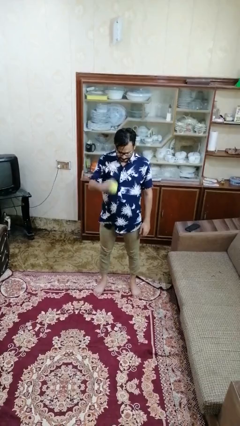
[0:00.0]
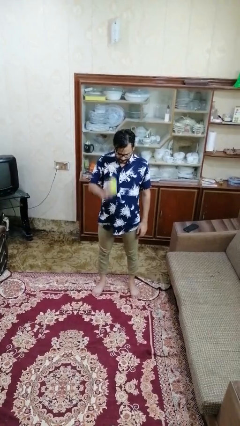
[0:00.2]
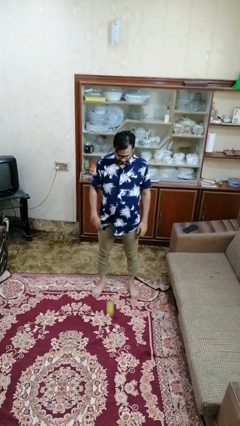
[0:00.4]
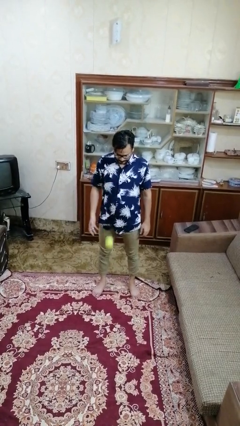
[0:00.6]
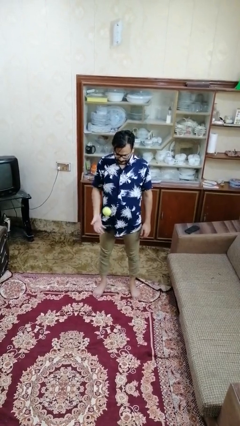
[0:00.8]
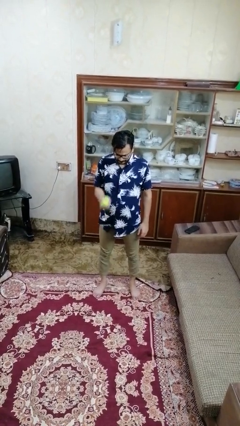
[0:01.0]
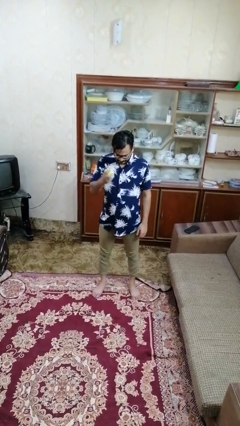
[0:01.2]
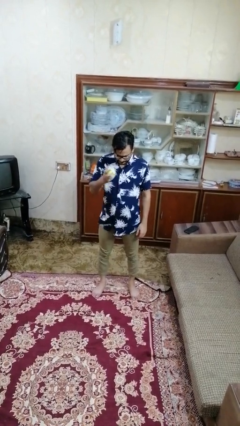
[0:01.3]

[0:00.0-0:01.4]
person bounces ball on floor

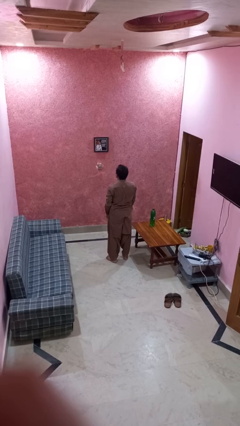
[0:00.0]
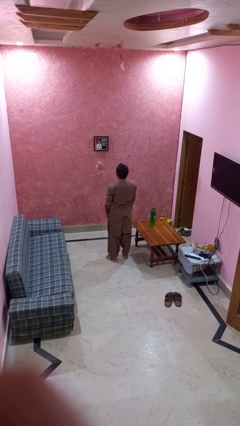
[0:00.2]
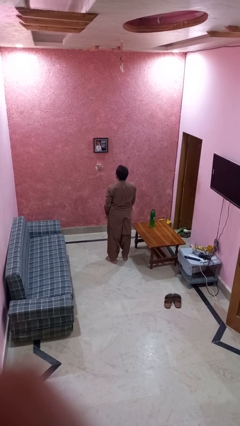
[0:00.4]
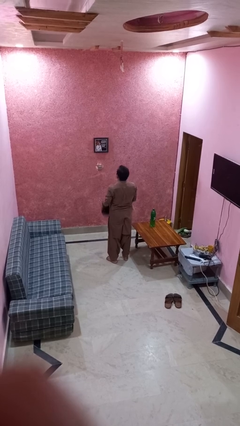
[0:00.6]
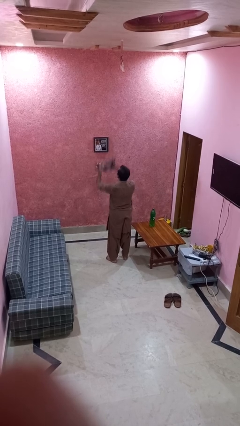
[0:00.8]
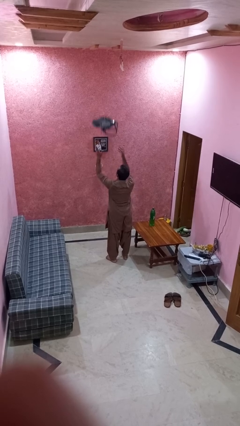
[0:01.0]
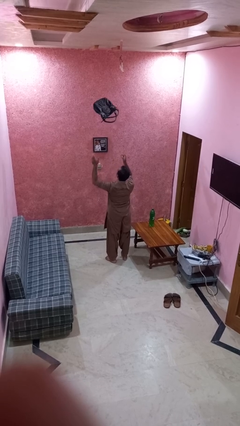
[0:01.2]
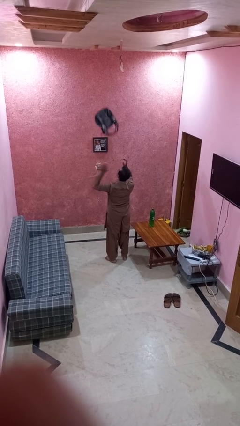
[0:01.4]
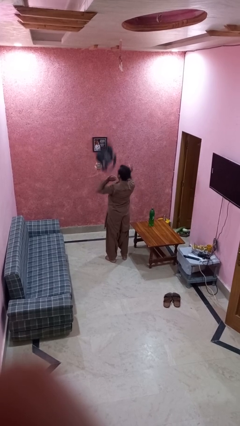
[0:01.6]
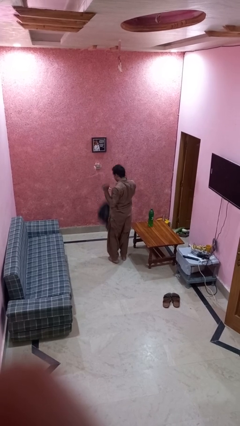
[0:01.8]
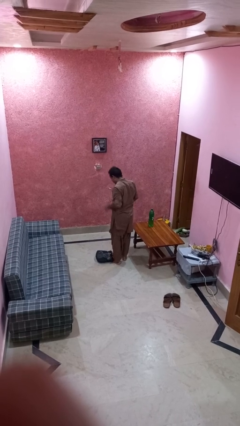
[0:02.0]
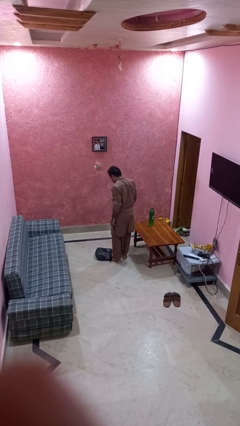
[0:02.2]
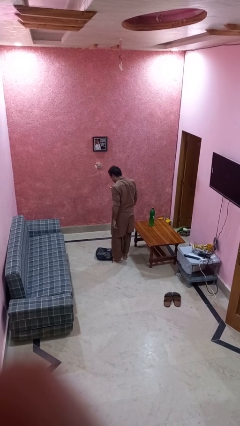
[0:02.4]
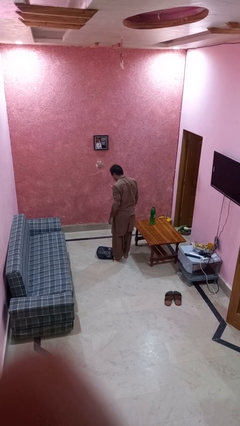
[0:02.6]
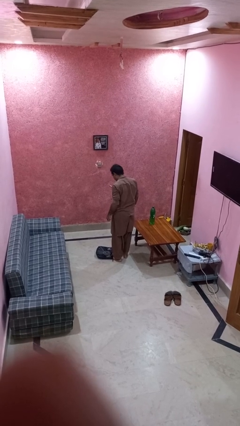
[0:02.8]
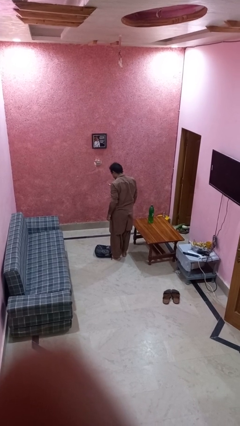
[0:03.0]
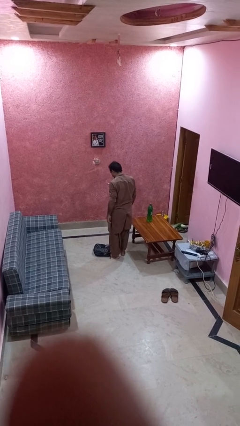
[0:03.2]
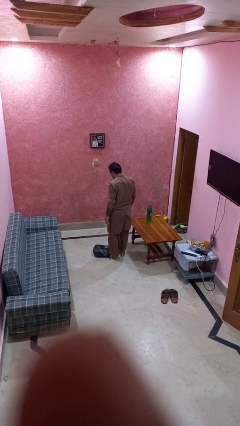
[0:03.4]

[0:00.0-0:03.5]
person throws object into air

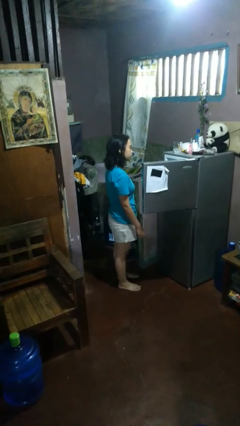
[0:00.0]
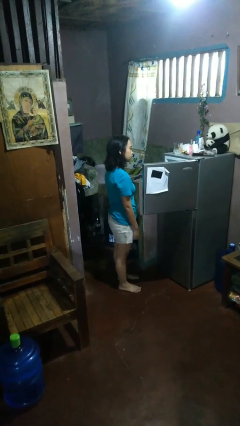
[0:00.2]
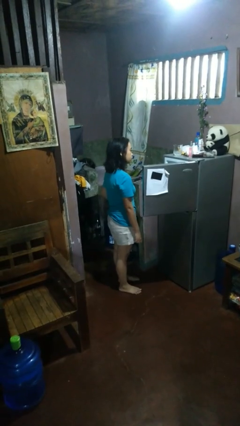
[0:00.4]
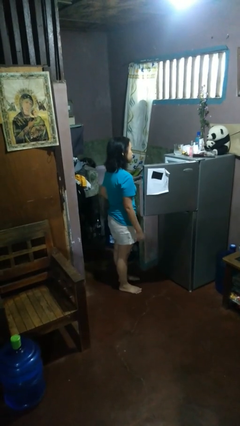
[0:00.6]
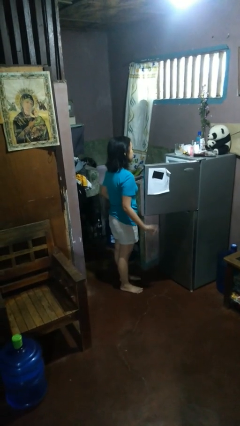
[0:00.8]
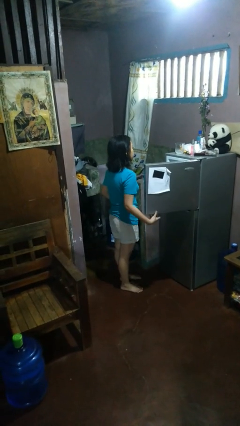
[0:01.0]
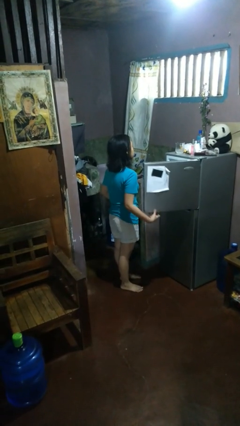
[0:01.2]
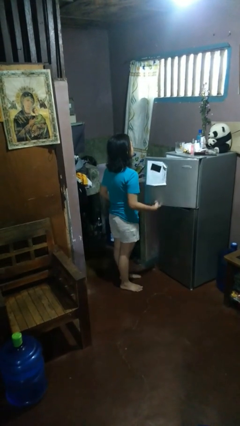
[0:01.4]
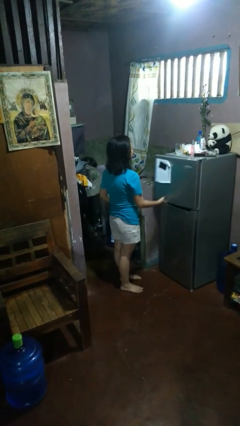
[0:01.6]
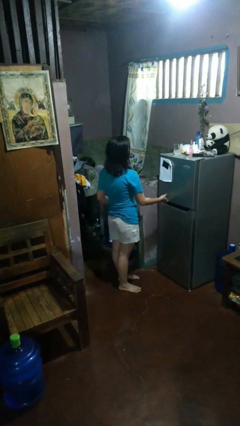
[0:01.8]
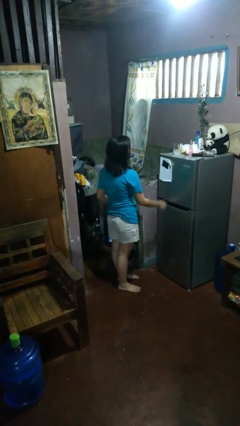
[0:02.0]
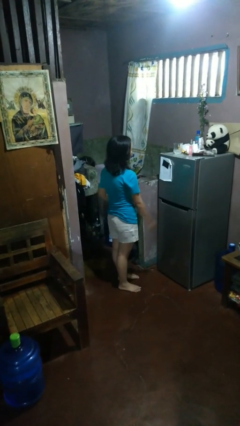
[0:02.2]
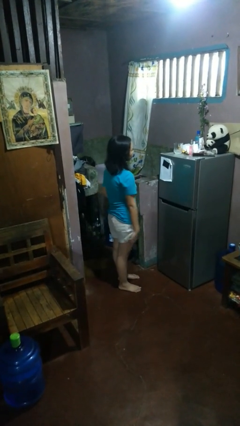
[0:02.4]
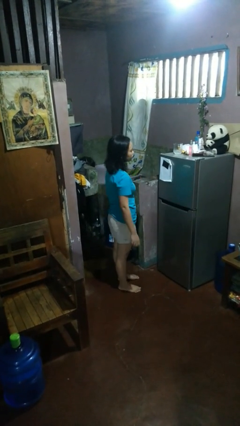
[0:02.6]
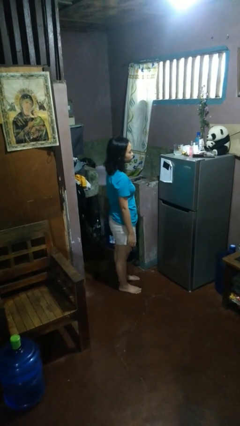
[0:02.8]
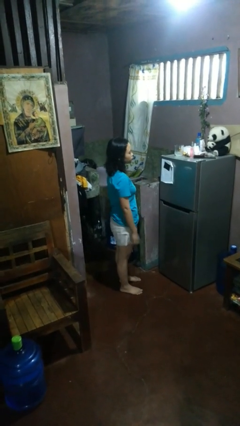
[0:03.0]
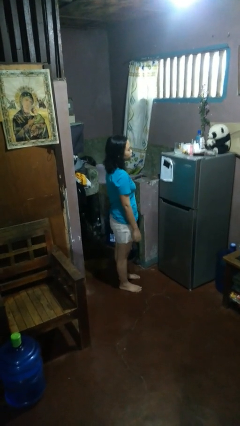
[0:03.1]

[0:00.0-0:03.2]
person closes refrigerator

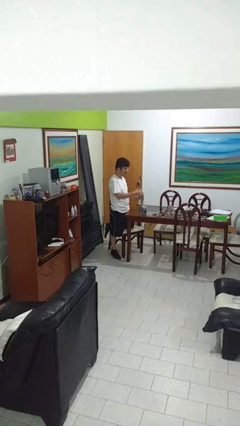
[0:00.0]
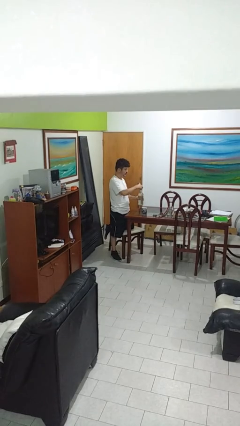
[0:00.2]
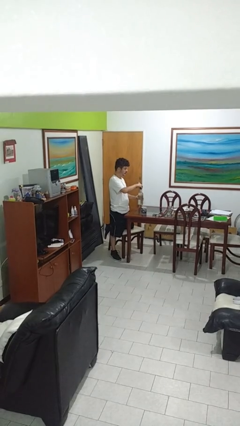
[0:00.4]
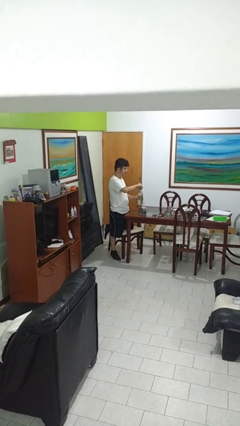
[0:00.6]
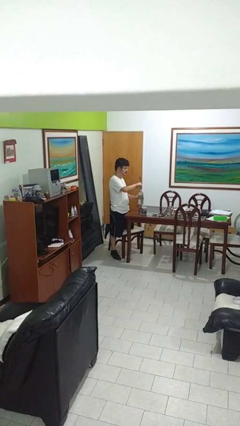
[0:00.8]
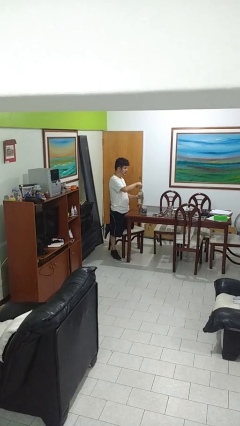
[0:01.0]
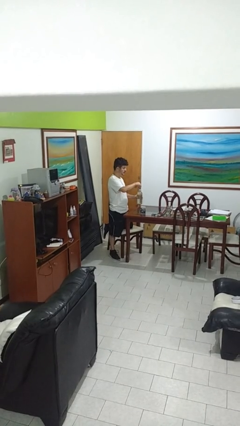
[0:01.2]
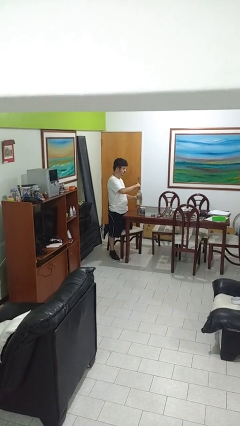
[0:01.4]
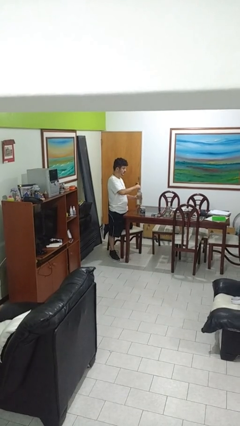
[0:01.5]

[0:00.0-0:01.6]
person screws lid to bottle

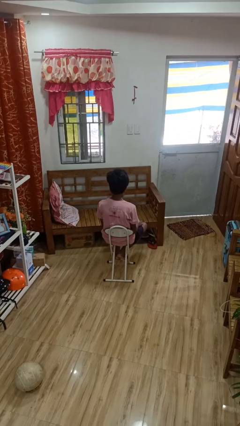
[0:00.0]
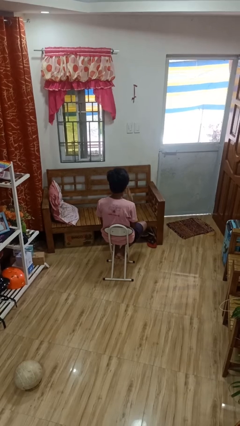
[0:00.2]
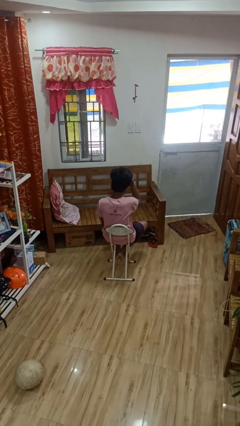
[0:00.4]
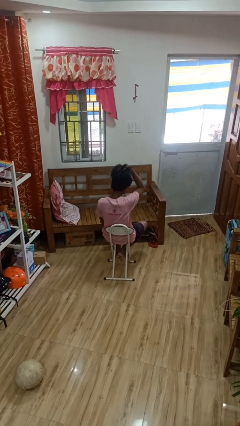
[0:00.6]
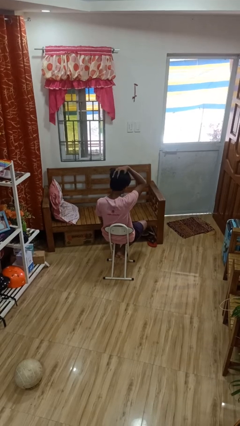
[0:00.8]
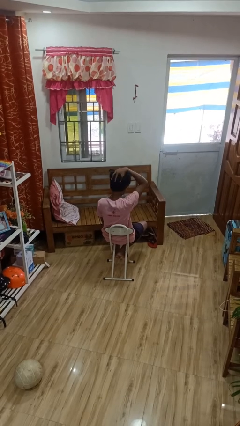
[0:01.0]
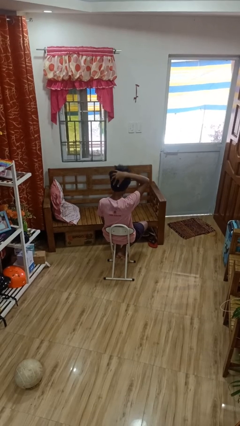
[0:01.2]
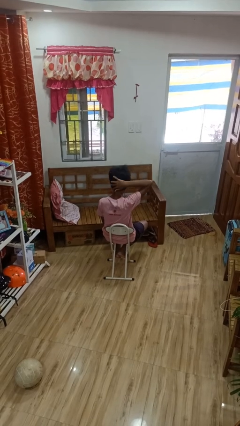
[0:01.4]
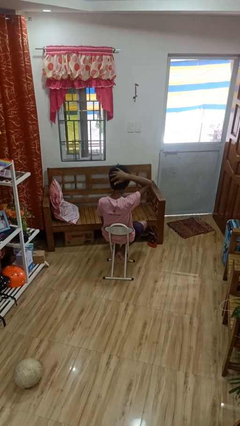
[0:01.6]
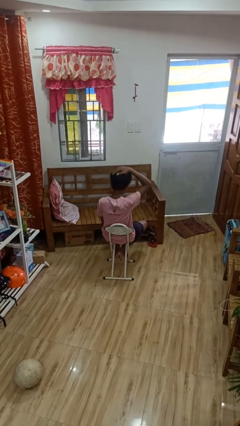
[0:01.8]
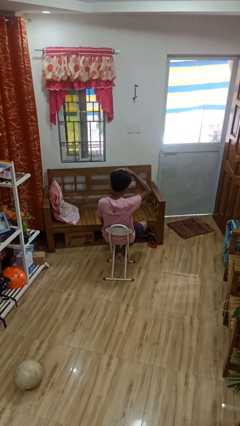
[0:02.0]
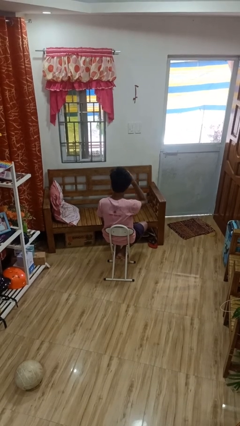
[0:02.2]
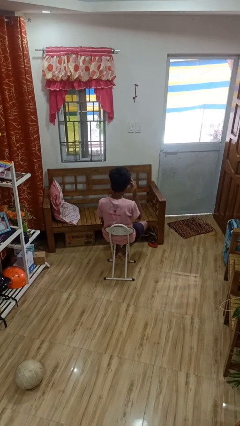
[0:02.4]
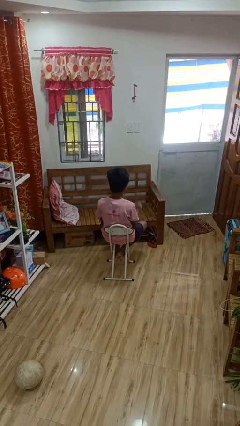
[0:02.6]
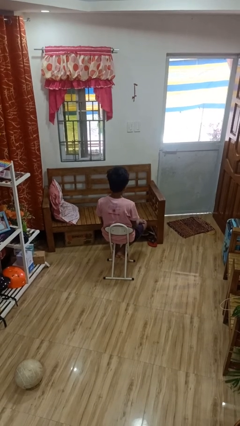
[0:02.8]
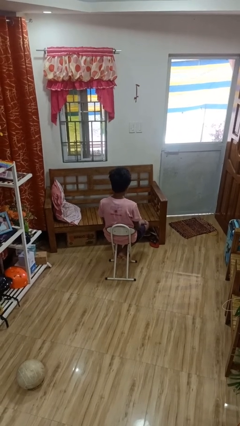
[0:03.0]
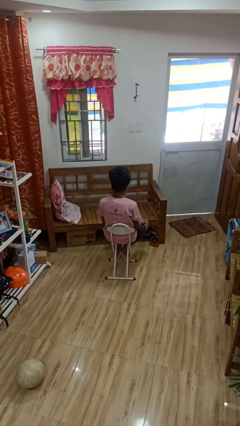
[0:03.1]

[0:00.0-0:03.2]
person strokes hair

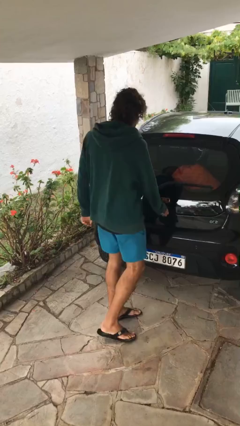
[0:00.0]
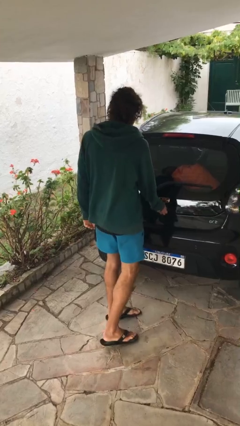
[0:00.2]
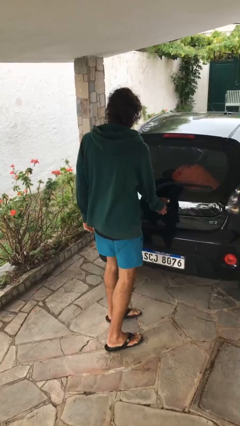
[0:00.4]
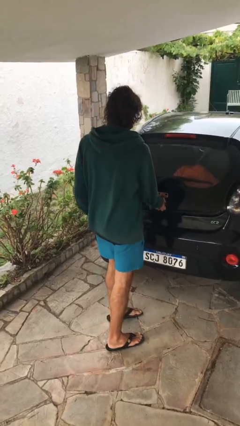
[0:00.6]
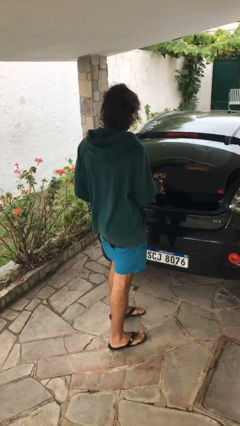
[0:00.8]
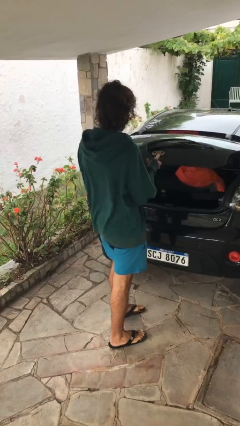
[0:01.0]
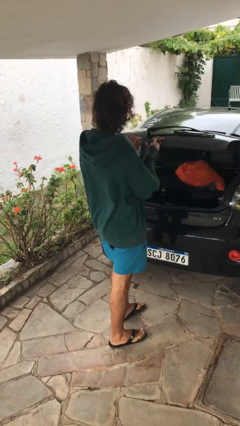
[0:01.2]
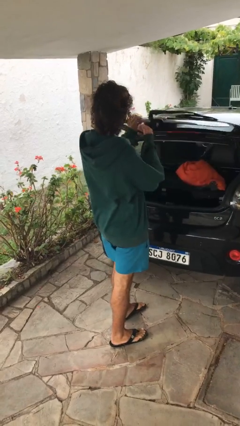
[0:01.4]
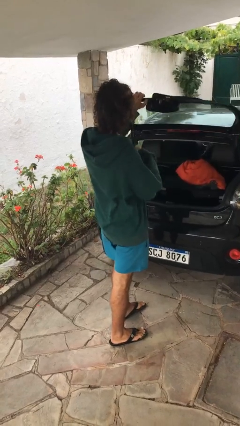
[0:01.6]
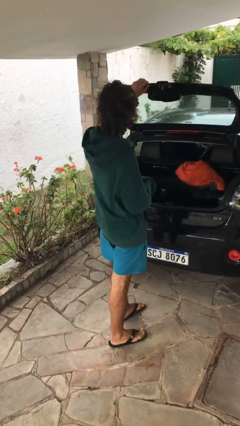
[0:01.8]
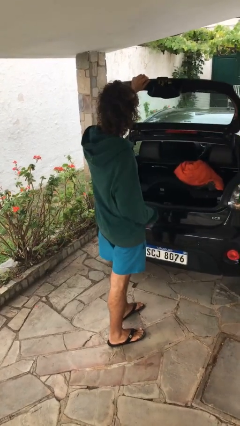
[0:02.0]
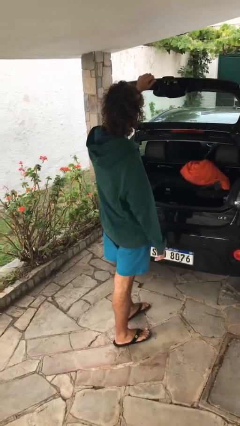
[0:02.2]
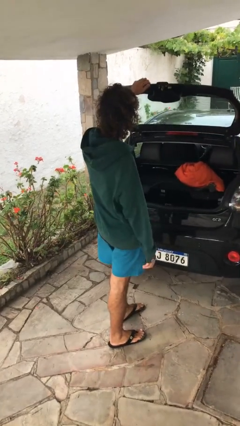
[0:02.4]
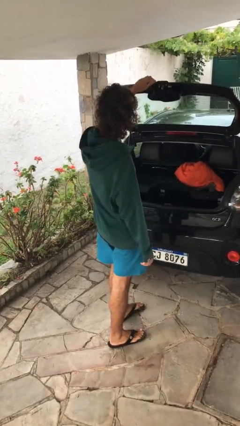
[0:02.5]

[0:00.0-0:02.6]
person opens car trunk

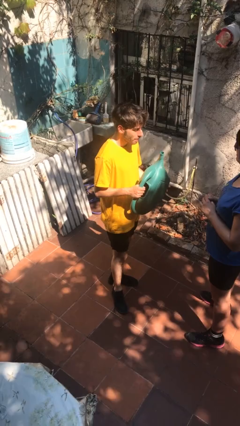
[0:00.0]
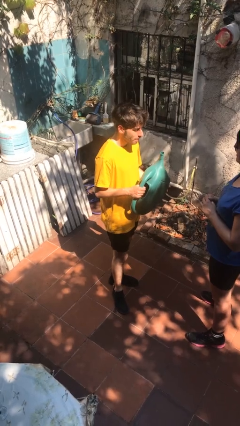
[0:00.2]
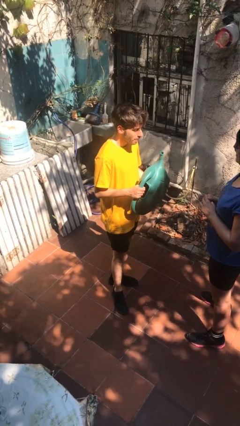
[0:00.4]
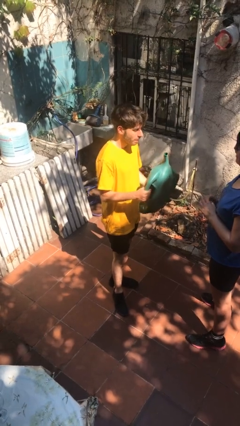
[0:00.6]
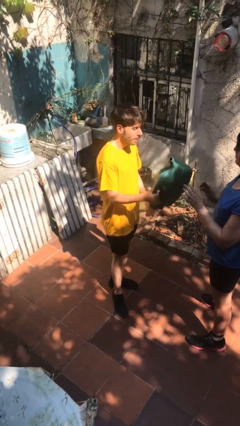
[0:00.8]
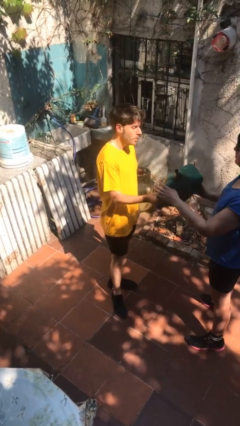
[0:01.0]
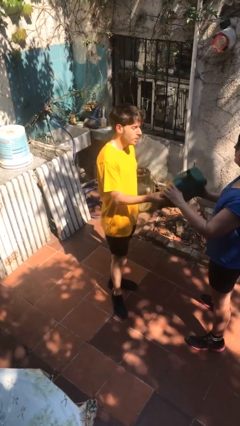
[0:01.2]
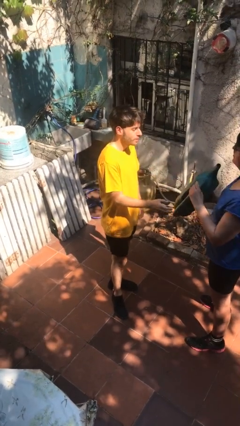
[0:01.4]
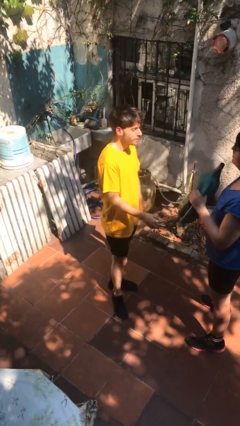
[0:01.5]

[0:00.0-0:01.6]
person transfers object to person
